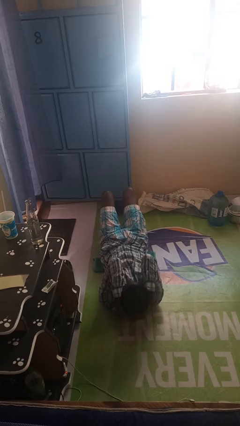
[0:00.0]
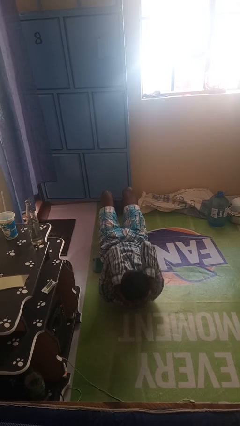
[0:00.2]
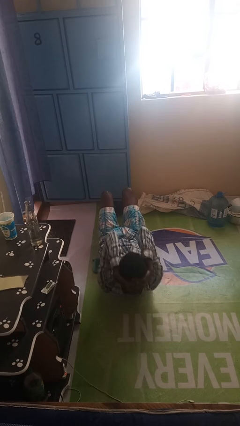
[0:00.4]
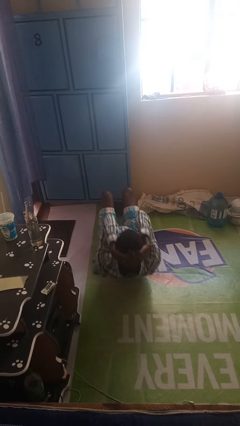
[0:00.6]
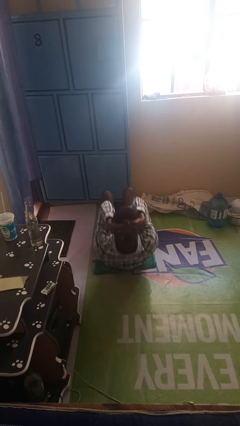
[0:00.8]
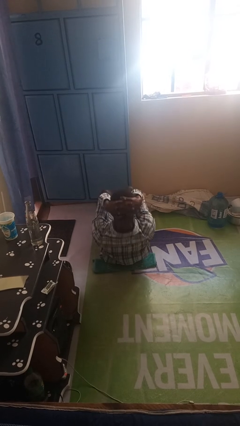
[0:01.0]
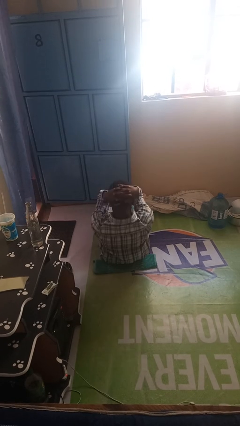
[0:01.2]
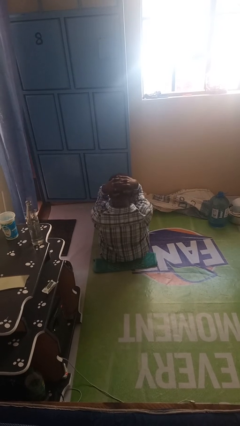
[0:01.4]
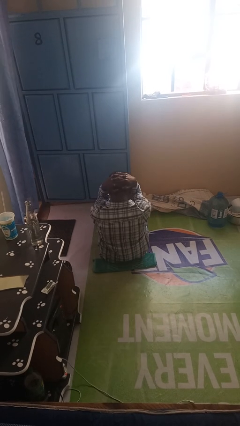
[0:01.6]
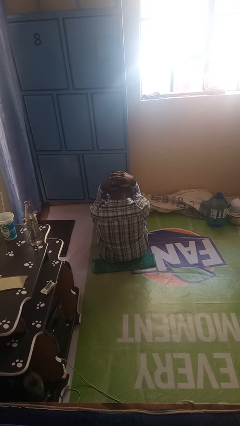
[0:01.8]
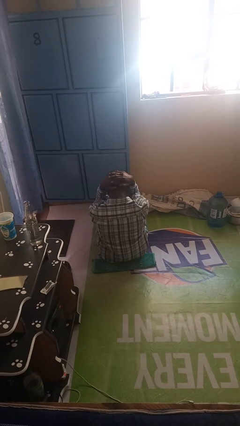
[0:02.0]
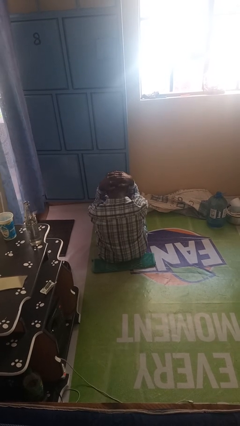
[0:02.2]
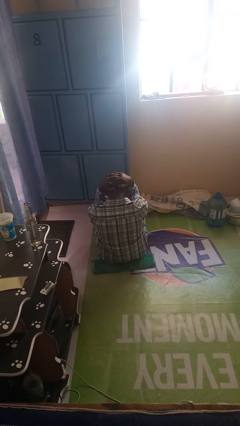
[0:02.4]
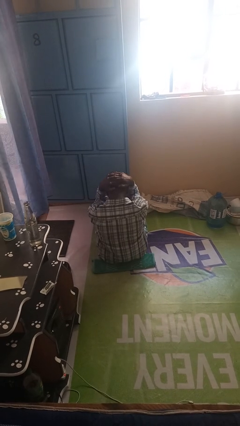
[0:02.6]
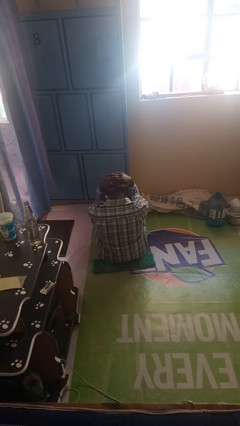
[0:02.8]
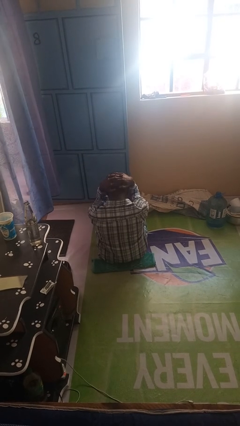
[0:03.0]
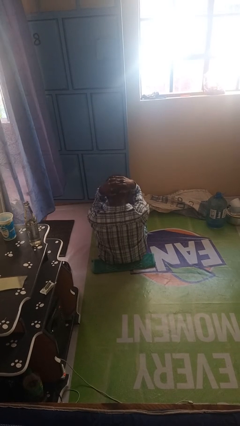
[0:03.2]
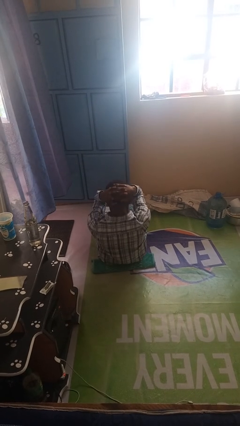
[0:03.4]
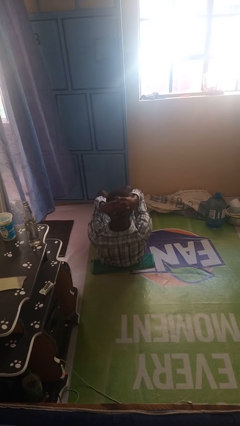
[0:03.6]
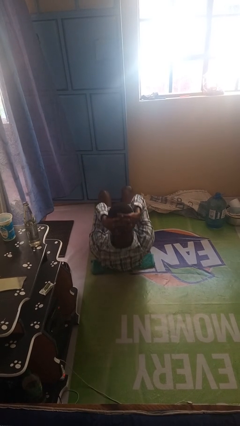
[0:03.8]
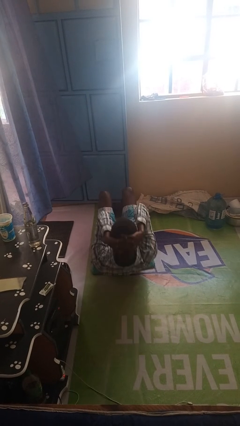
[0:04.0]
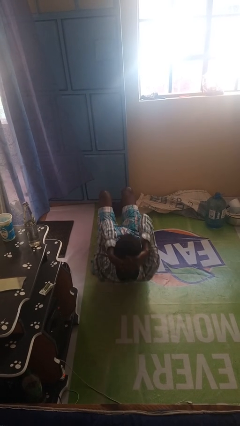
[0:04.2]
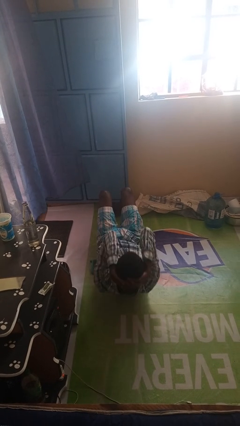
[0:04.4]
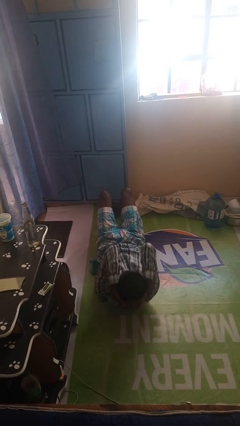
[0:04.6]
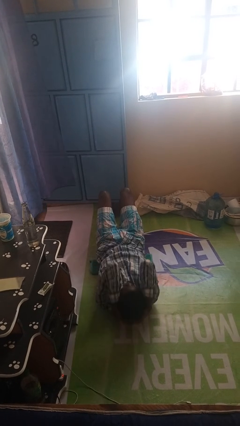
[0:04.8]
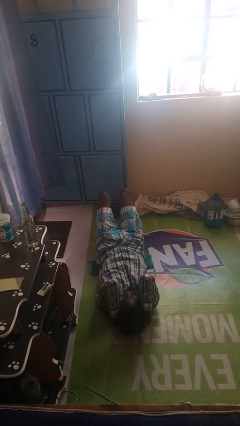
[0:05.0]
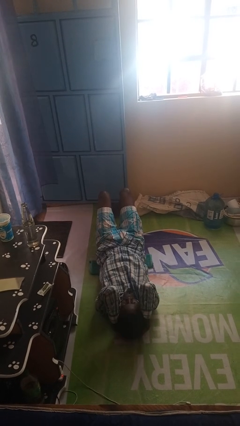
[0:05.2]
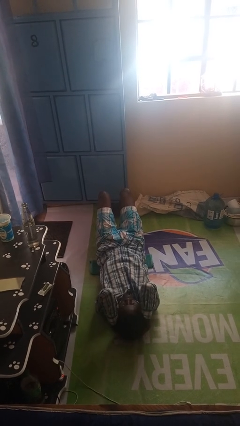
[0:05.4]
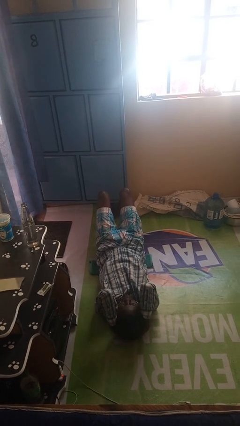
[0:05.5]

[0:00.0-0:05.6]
person exercises with situp

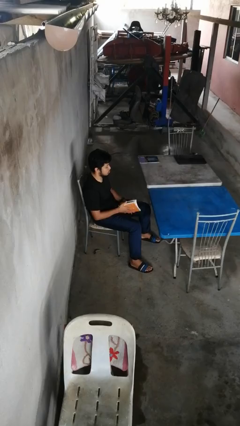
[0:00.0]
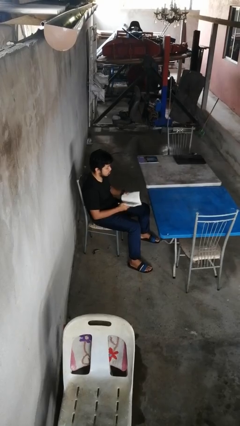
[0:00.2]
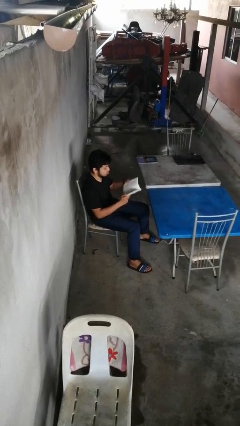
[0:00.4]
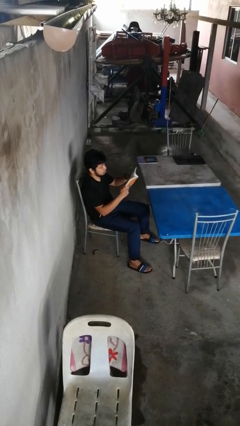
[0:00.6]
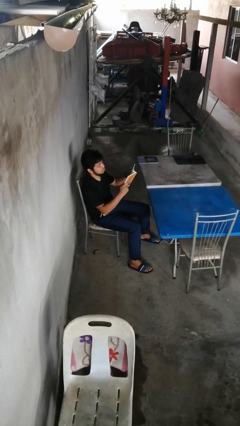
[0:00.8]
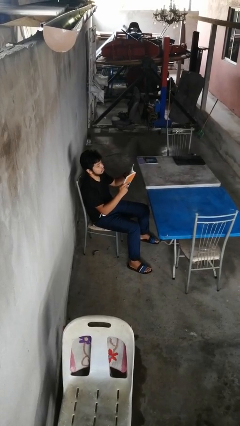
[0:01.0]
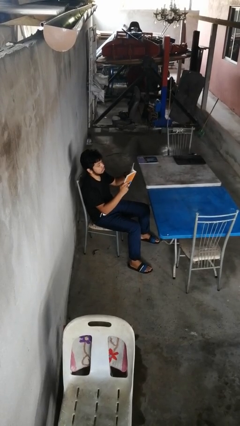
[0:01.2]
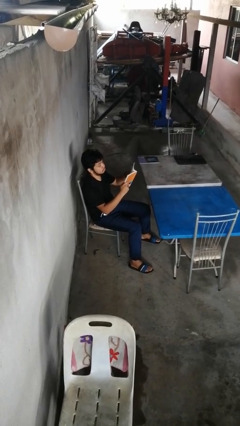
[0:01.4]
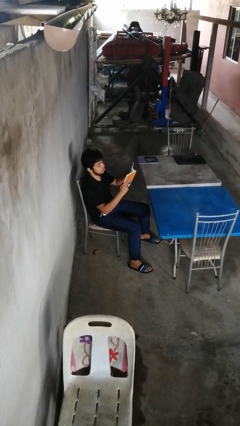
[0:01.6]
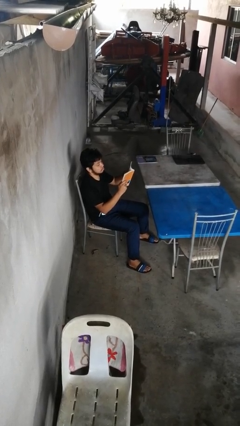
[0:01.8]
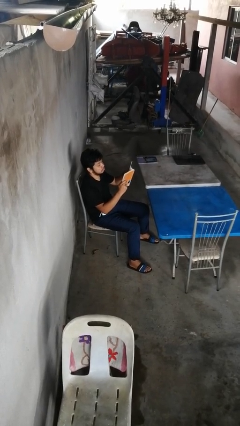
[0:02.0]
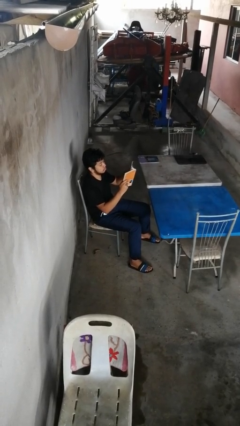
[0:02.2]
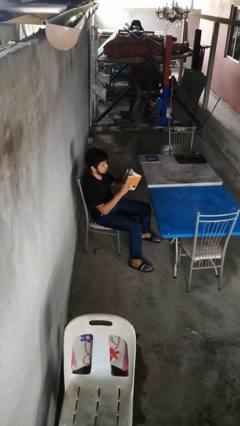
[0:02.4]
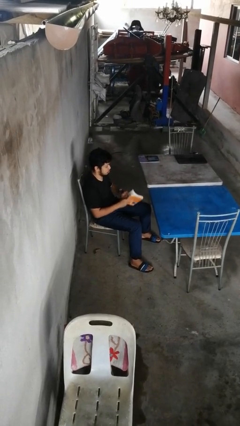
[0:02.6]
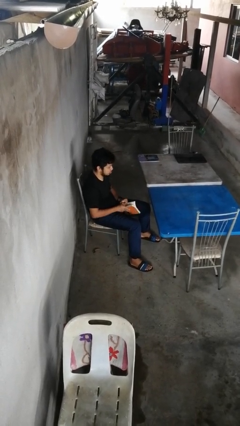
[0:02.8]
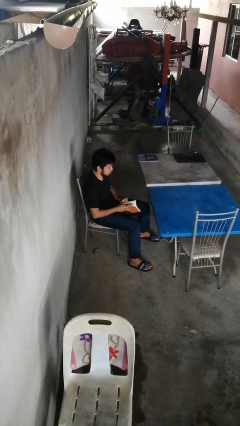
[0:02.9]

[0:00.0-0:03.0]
person reads book

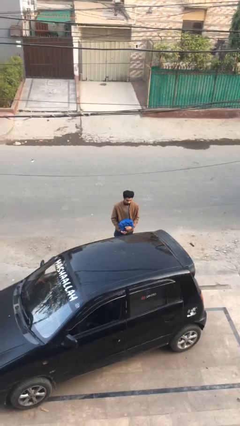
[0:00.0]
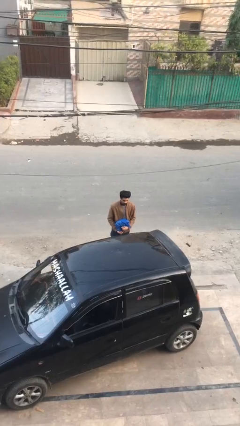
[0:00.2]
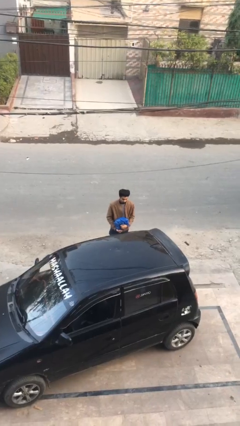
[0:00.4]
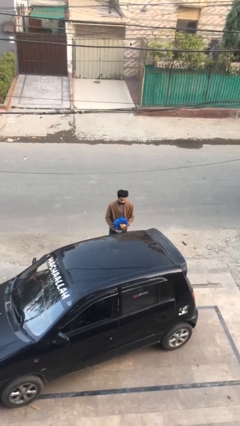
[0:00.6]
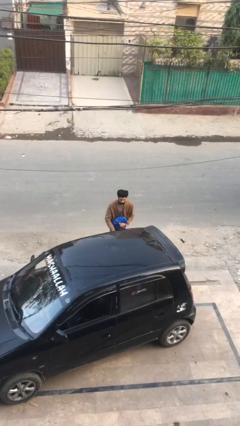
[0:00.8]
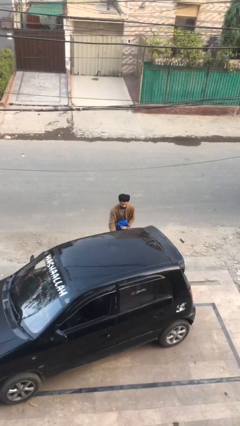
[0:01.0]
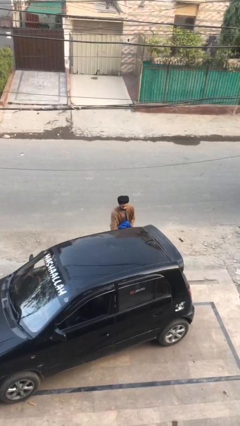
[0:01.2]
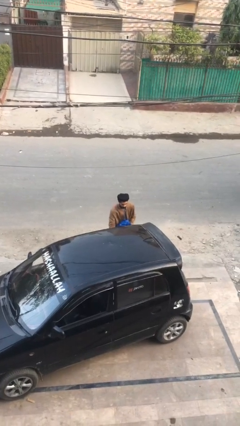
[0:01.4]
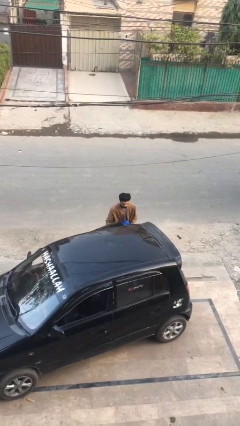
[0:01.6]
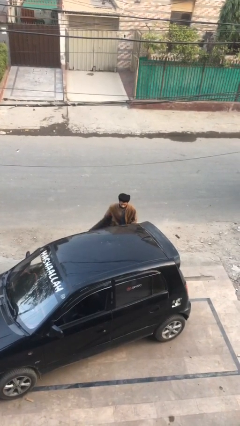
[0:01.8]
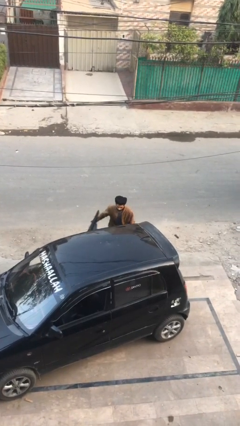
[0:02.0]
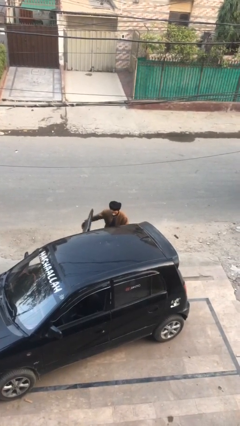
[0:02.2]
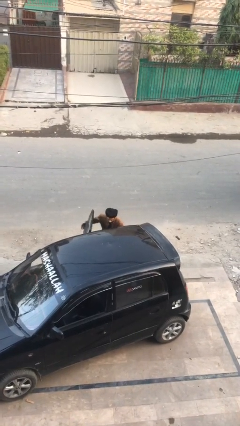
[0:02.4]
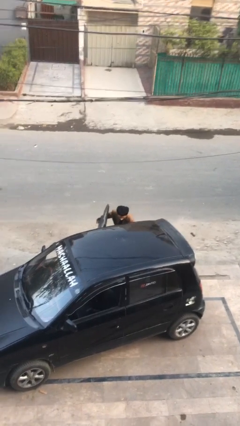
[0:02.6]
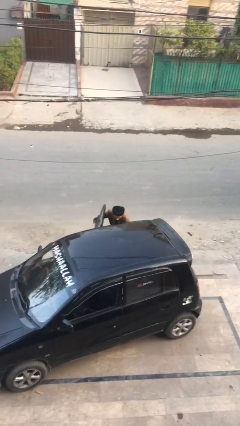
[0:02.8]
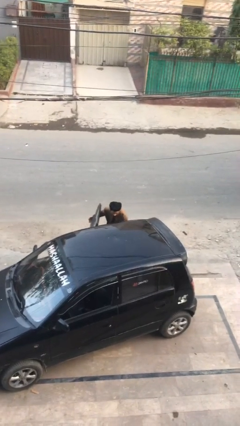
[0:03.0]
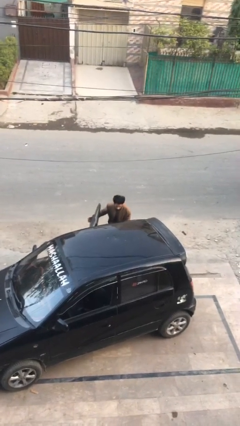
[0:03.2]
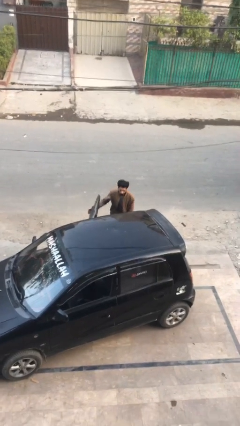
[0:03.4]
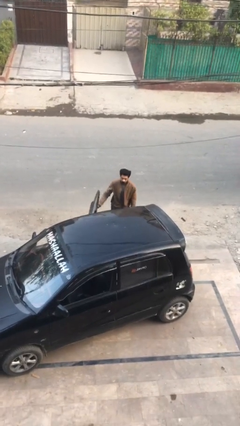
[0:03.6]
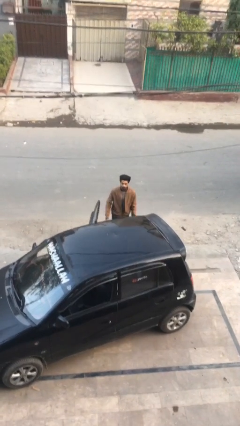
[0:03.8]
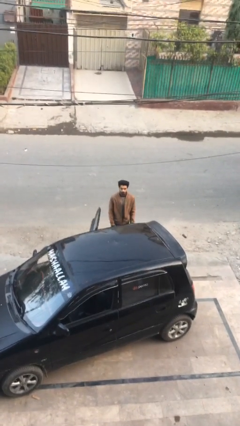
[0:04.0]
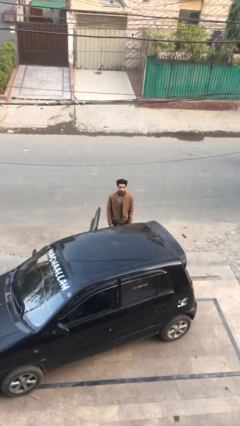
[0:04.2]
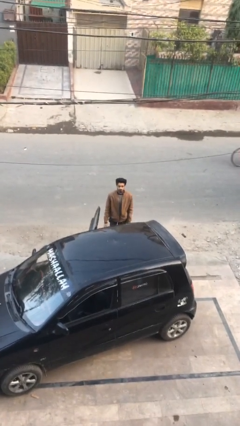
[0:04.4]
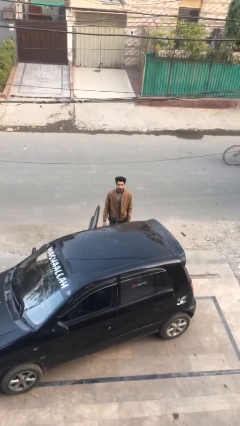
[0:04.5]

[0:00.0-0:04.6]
person loads car

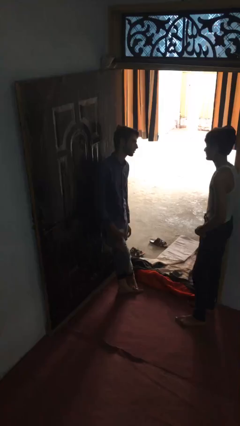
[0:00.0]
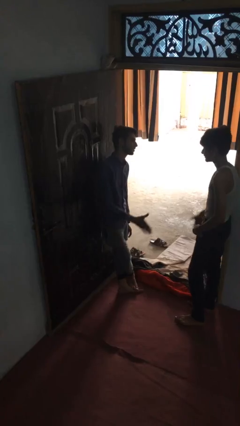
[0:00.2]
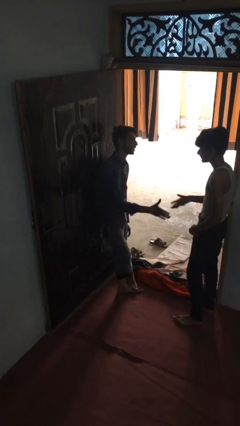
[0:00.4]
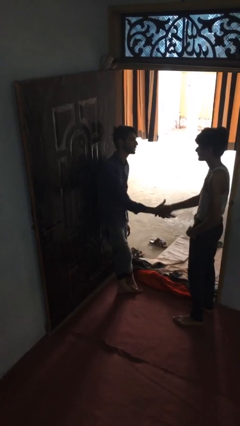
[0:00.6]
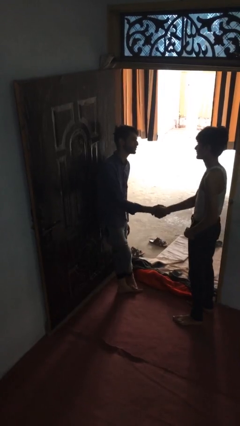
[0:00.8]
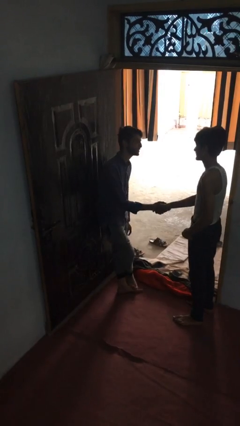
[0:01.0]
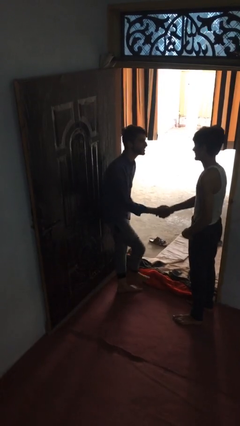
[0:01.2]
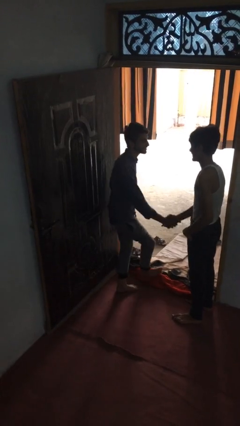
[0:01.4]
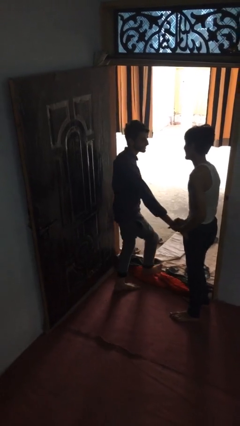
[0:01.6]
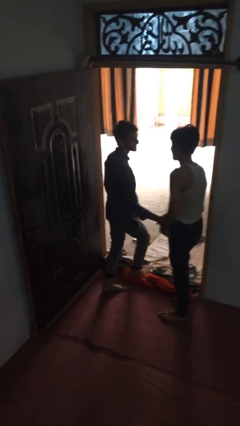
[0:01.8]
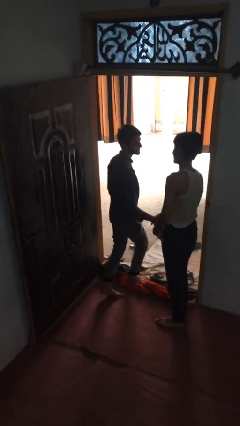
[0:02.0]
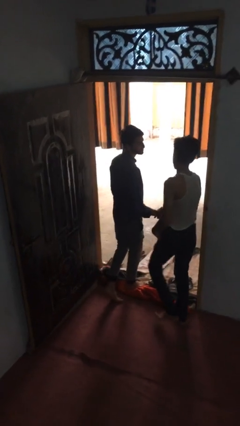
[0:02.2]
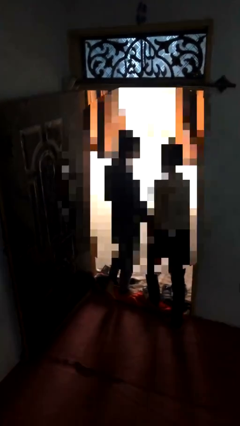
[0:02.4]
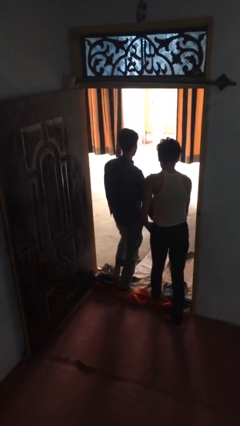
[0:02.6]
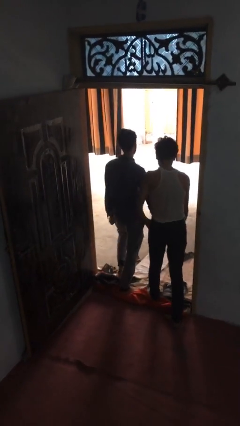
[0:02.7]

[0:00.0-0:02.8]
person talks to person

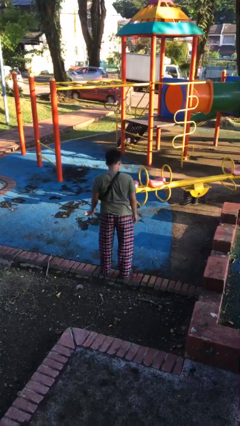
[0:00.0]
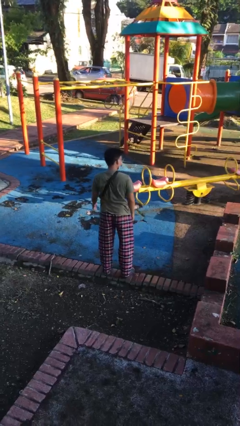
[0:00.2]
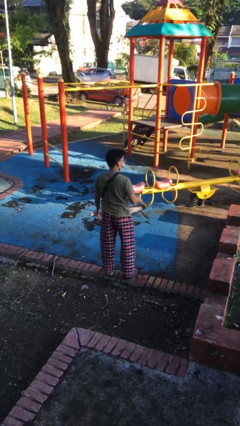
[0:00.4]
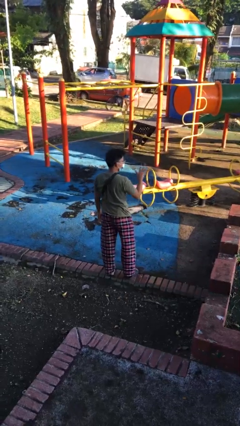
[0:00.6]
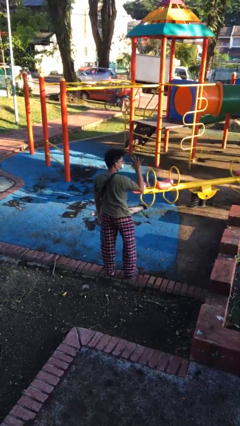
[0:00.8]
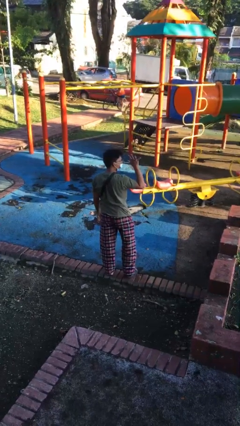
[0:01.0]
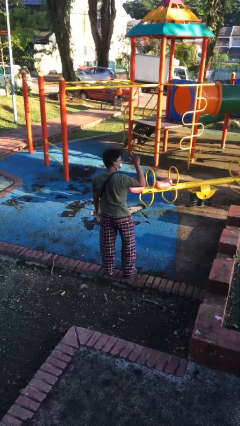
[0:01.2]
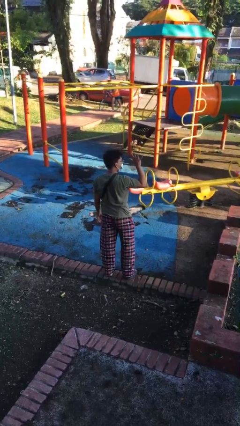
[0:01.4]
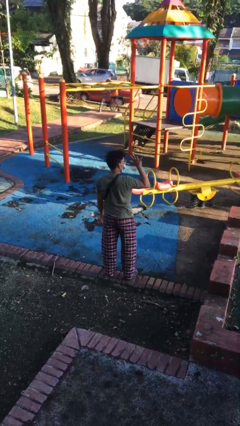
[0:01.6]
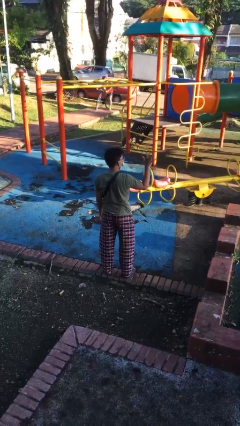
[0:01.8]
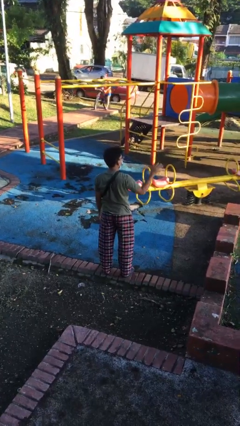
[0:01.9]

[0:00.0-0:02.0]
person gestures number five
